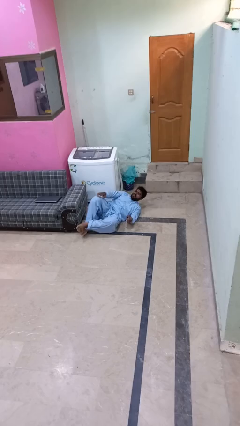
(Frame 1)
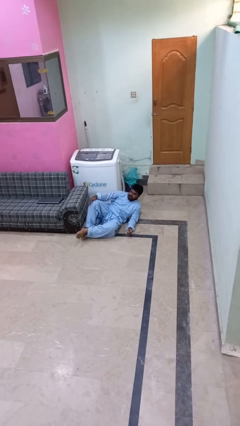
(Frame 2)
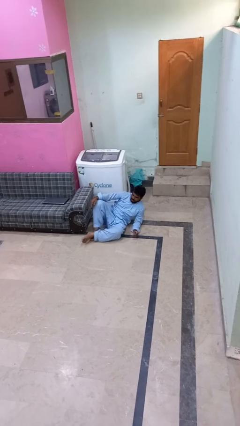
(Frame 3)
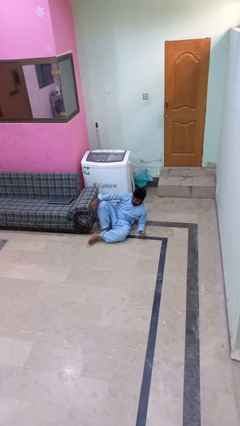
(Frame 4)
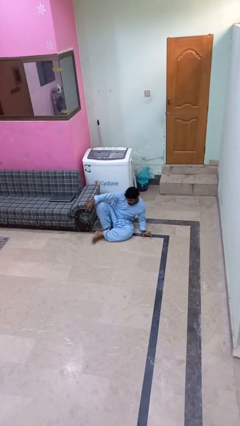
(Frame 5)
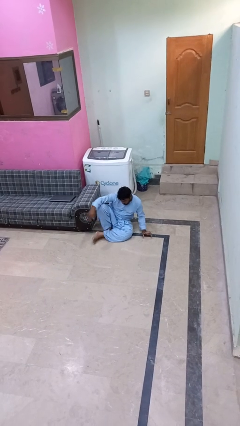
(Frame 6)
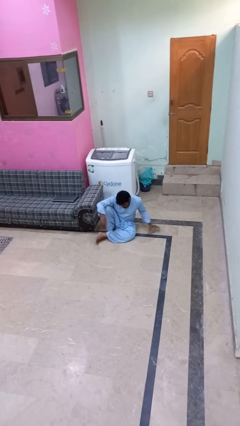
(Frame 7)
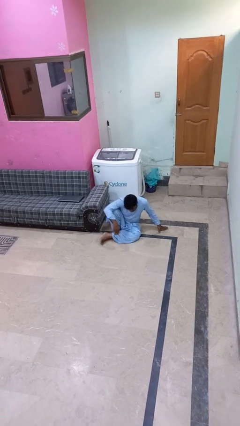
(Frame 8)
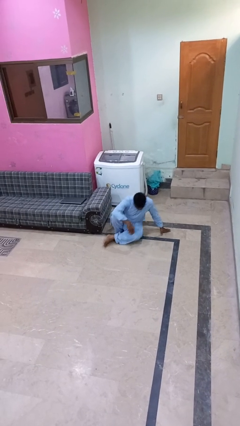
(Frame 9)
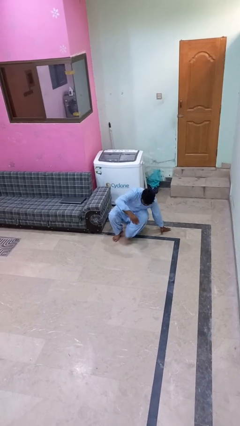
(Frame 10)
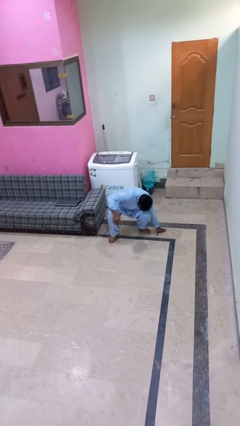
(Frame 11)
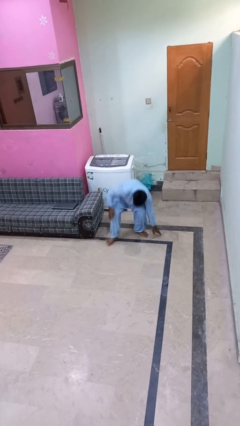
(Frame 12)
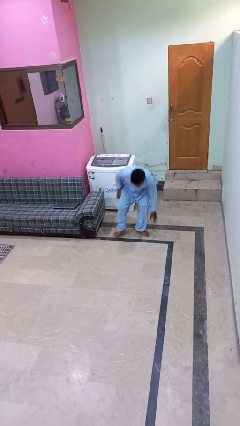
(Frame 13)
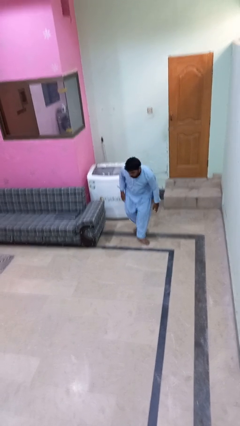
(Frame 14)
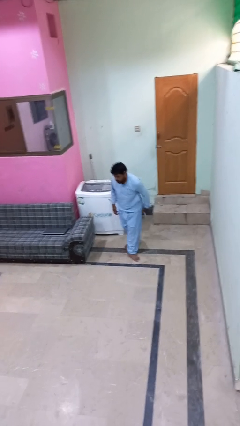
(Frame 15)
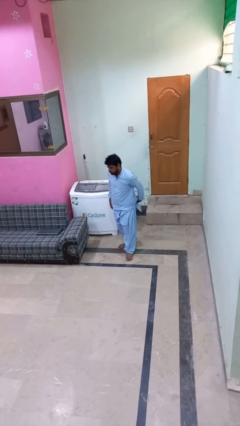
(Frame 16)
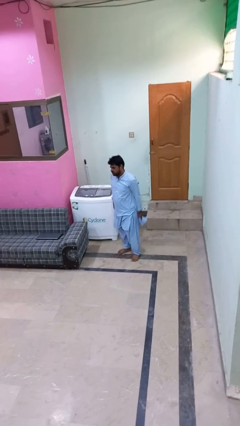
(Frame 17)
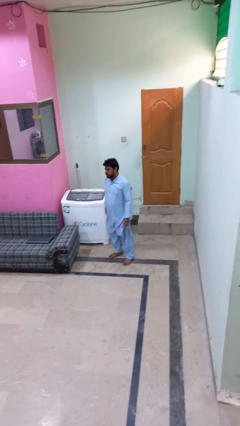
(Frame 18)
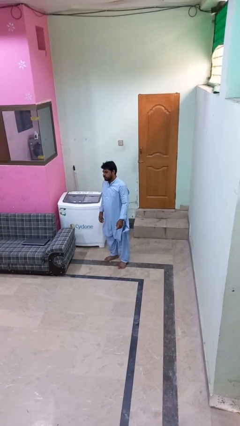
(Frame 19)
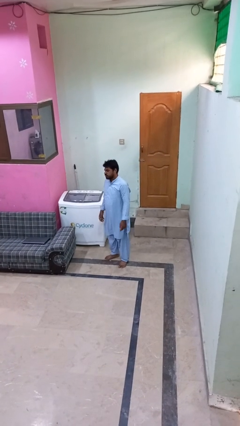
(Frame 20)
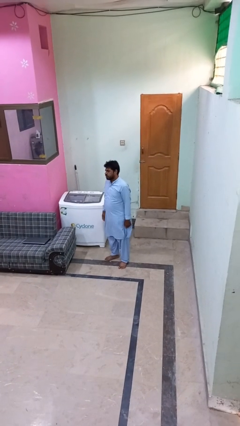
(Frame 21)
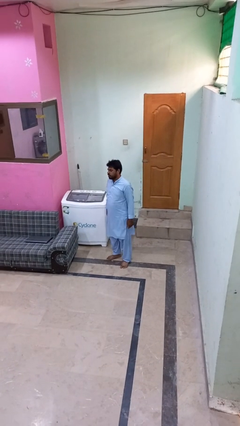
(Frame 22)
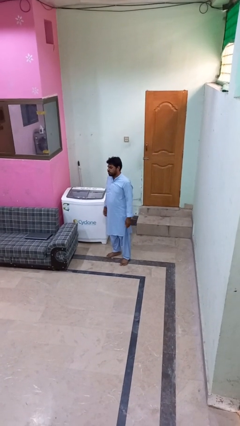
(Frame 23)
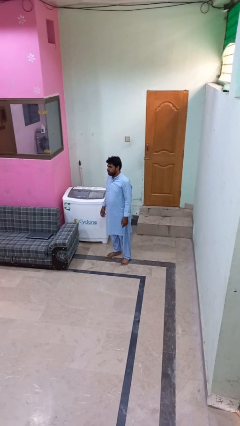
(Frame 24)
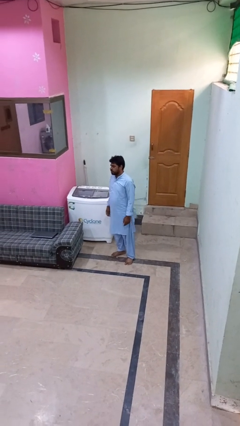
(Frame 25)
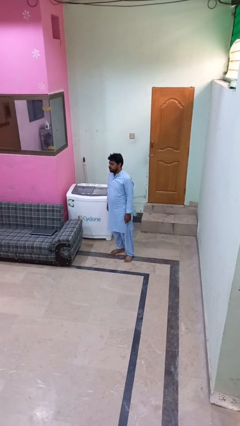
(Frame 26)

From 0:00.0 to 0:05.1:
person stands up from floor

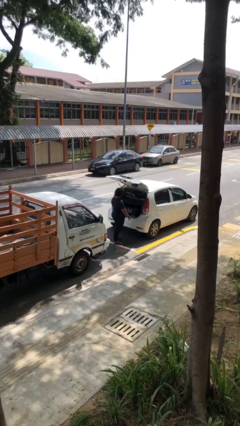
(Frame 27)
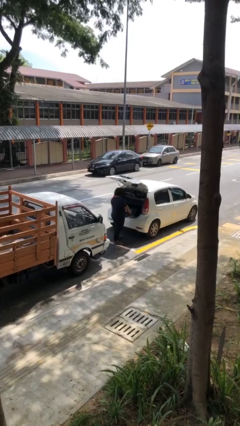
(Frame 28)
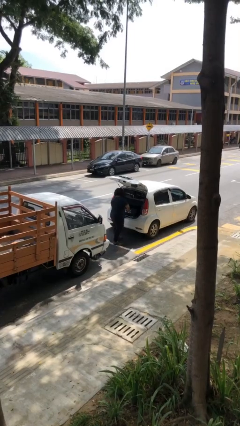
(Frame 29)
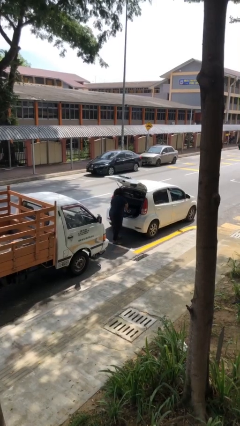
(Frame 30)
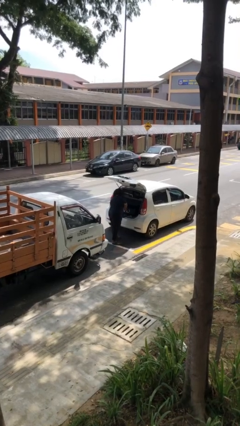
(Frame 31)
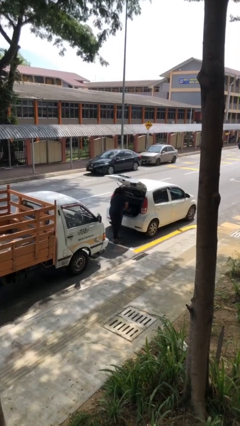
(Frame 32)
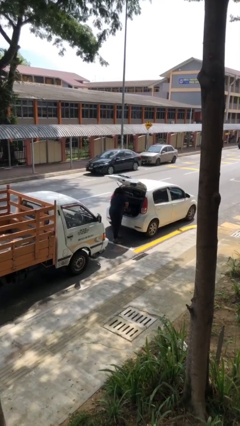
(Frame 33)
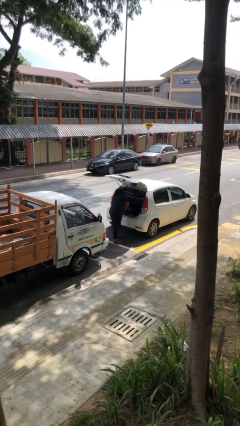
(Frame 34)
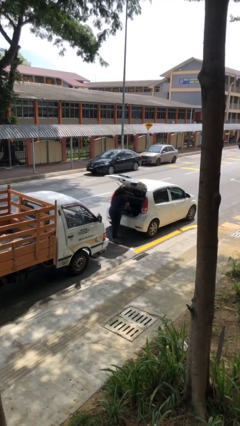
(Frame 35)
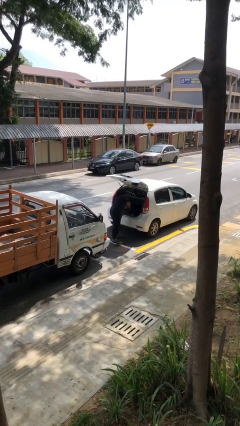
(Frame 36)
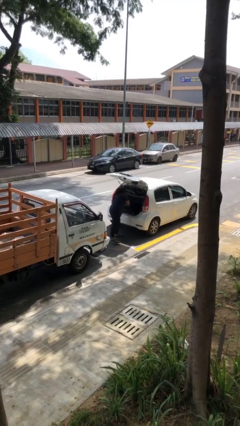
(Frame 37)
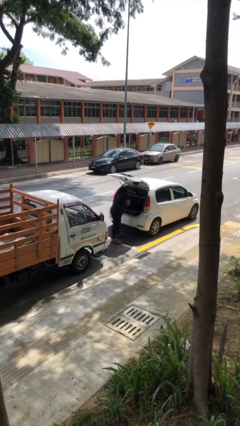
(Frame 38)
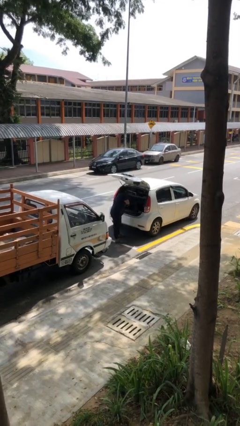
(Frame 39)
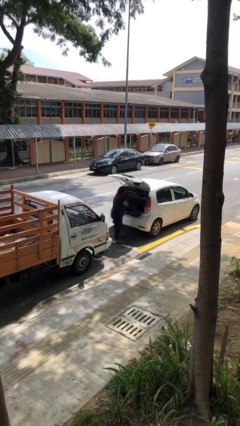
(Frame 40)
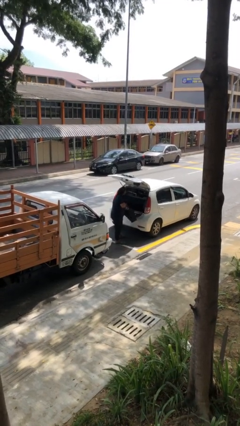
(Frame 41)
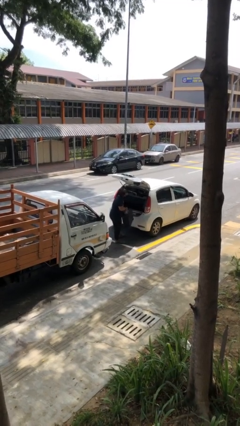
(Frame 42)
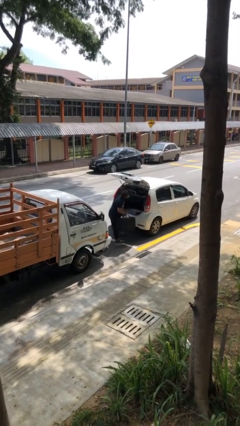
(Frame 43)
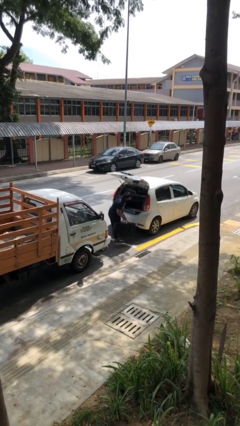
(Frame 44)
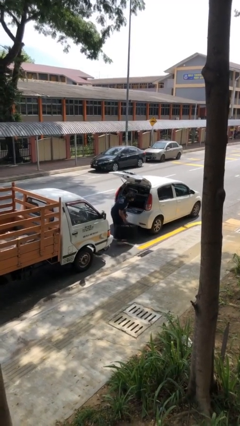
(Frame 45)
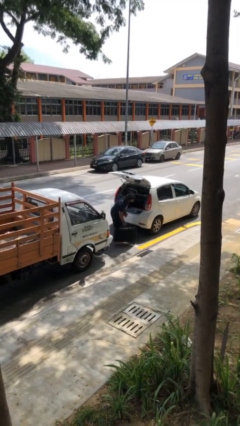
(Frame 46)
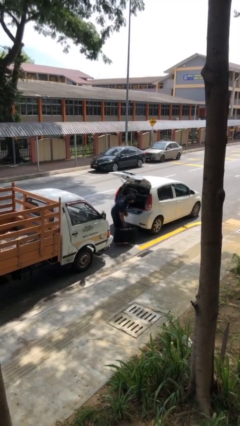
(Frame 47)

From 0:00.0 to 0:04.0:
person unloads car

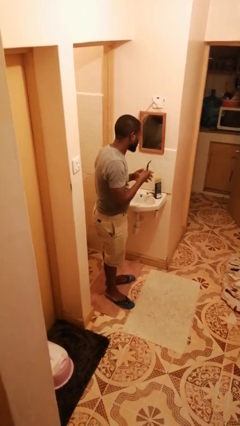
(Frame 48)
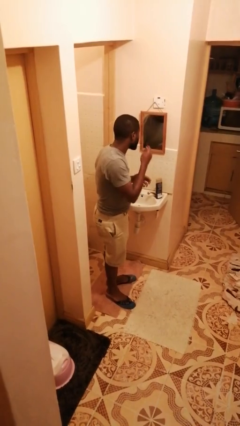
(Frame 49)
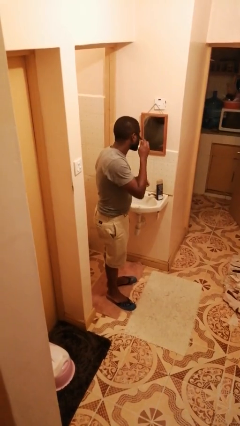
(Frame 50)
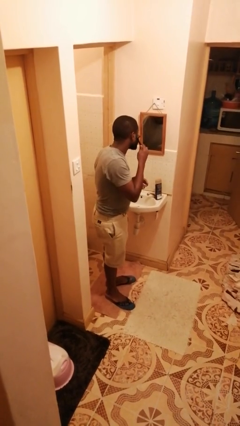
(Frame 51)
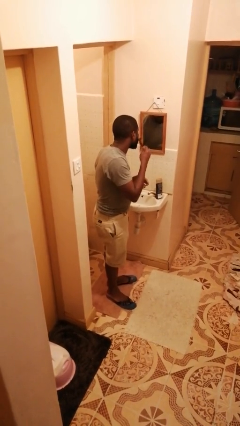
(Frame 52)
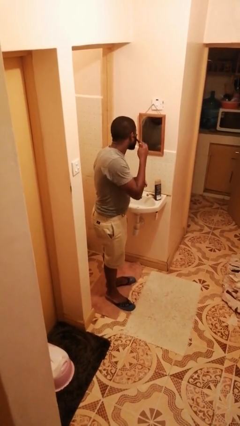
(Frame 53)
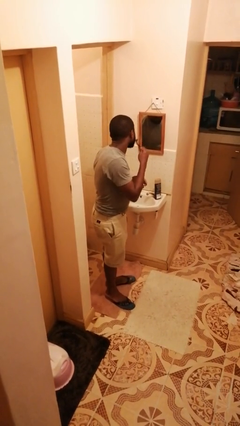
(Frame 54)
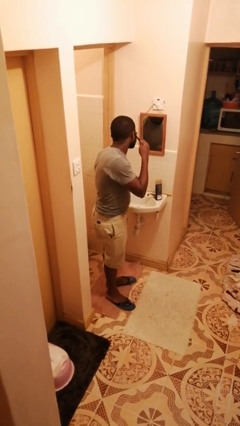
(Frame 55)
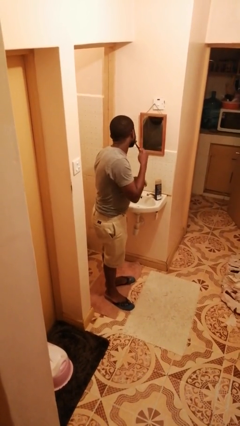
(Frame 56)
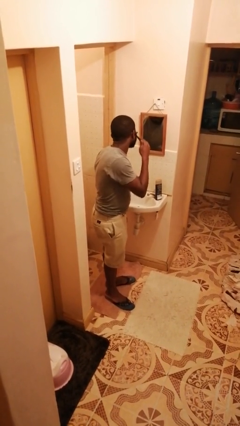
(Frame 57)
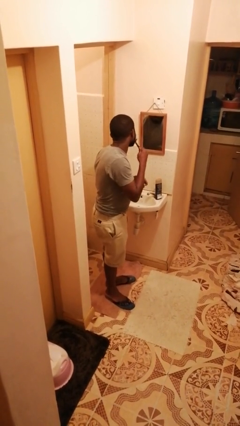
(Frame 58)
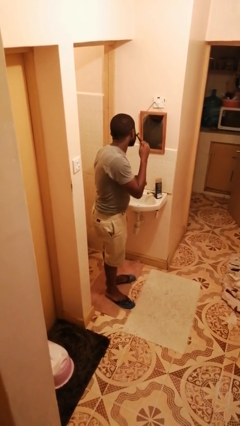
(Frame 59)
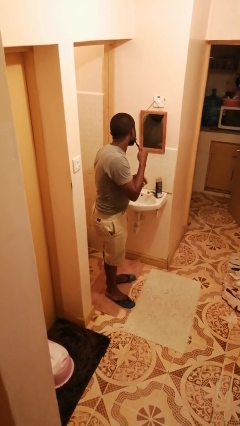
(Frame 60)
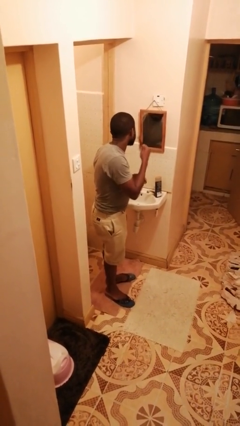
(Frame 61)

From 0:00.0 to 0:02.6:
person shaves face

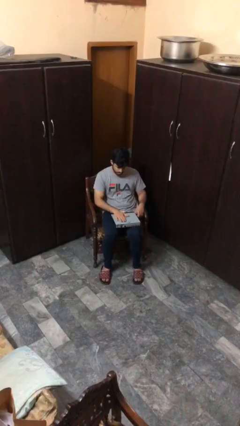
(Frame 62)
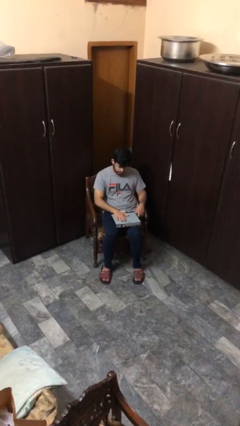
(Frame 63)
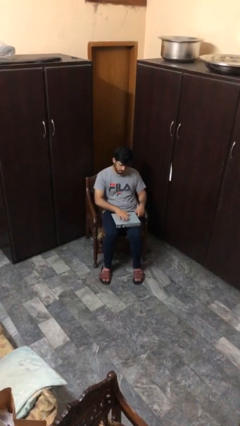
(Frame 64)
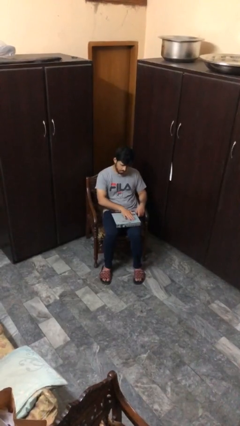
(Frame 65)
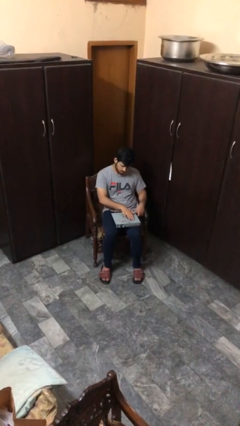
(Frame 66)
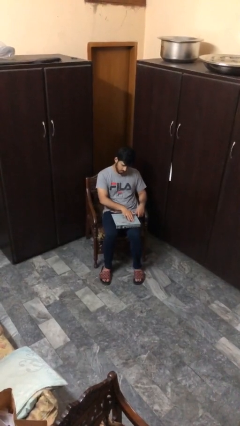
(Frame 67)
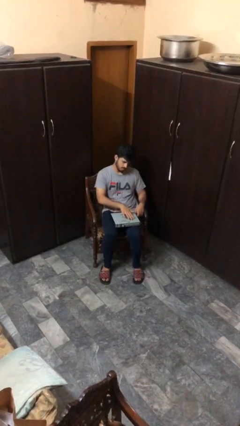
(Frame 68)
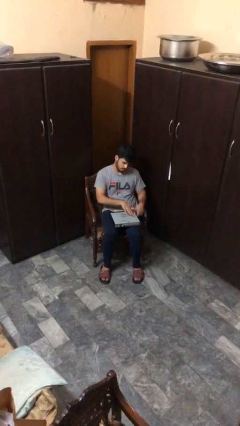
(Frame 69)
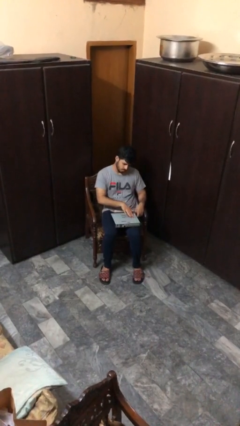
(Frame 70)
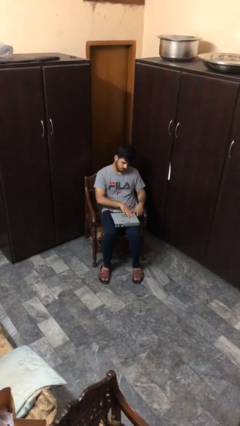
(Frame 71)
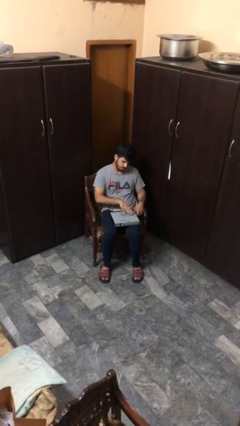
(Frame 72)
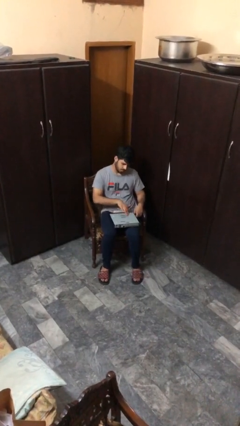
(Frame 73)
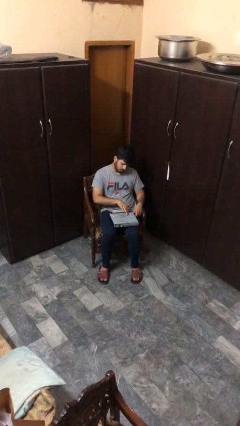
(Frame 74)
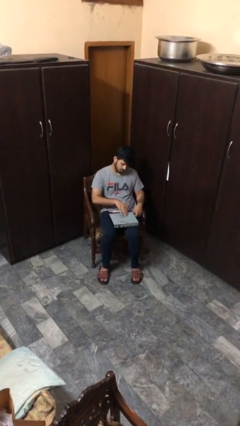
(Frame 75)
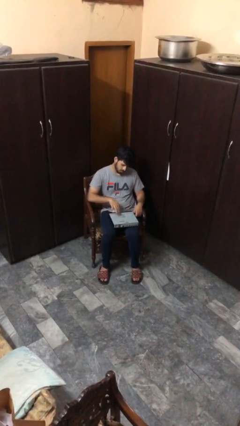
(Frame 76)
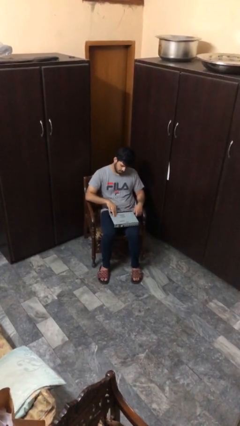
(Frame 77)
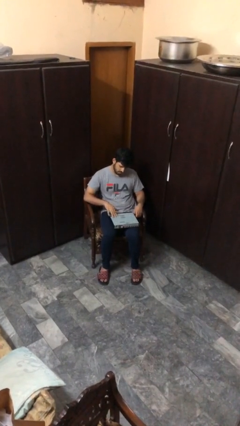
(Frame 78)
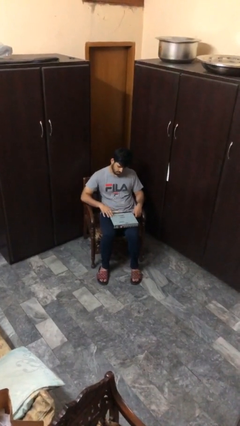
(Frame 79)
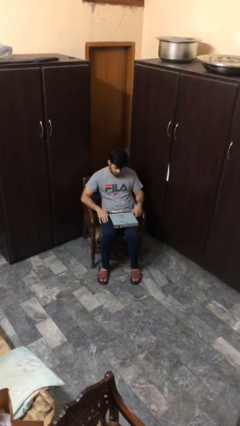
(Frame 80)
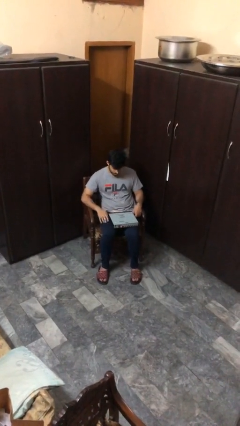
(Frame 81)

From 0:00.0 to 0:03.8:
person taps object with finger

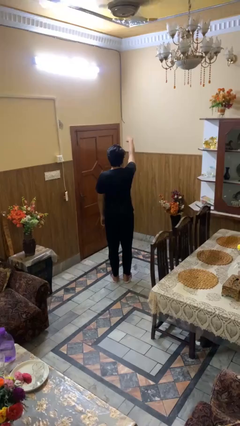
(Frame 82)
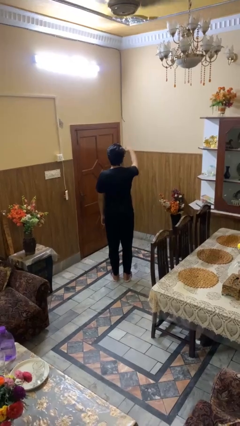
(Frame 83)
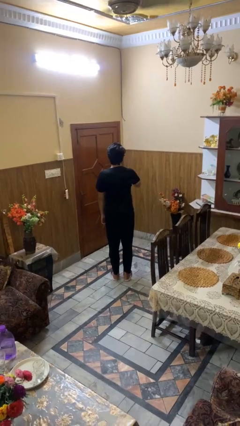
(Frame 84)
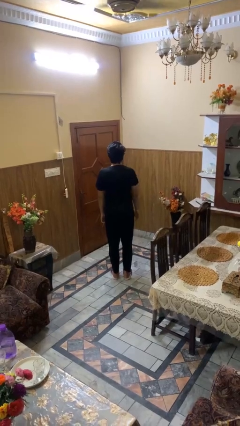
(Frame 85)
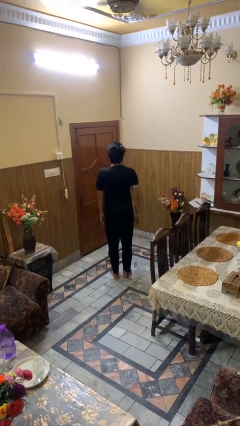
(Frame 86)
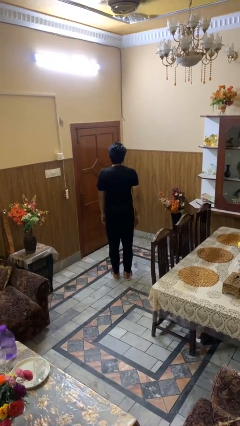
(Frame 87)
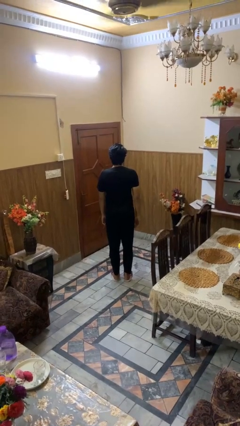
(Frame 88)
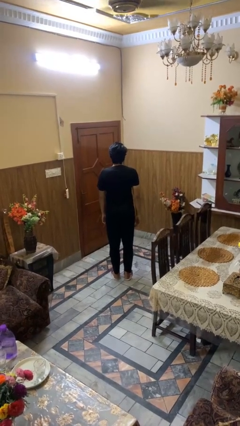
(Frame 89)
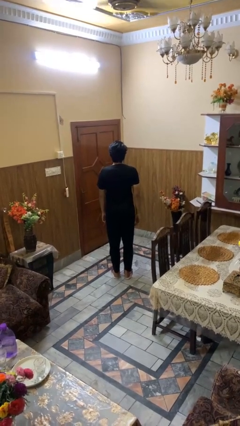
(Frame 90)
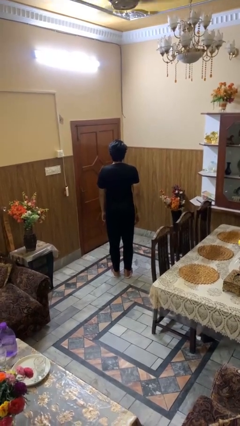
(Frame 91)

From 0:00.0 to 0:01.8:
person gestures swipe down
